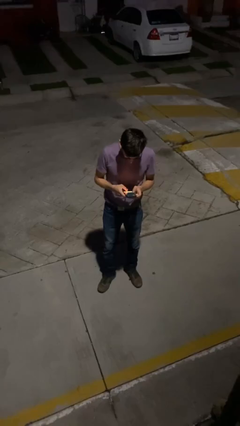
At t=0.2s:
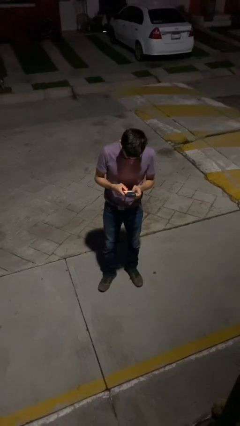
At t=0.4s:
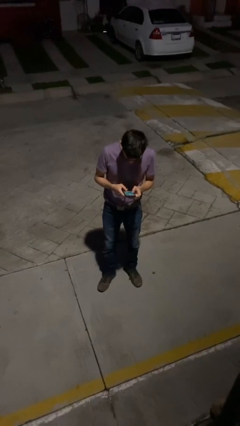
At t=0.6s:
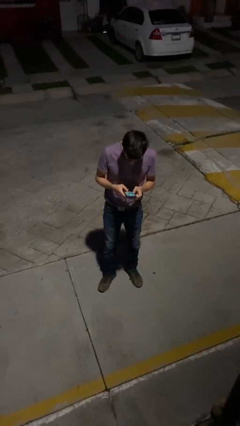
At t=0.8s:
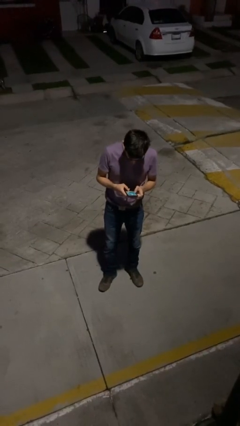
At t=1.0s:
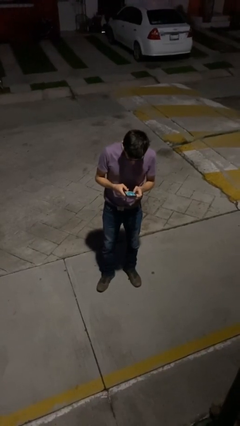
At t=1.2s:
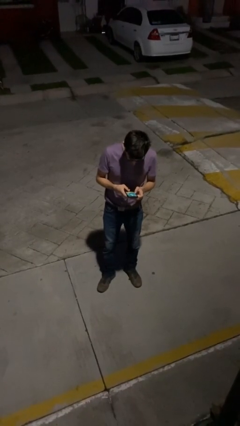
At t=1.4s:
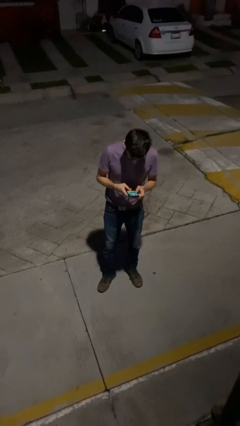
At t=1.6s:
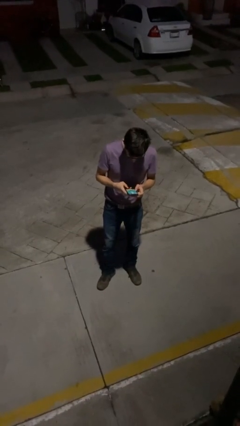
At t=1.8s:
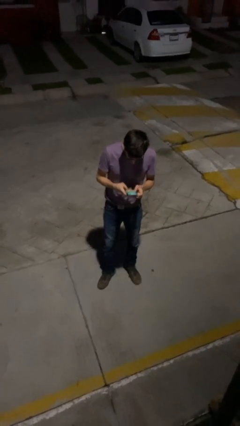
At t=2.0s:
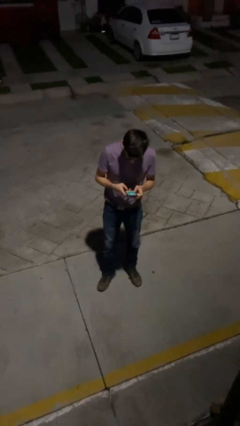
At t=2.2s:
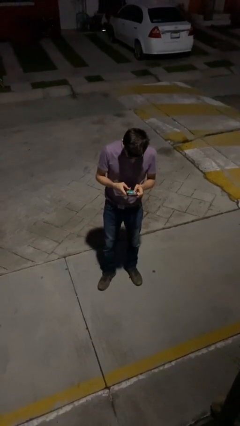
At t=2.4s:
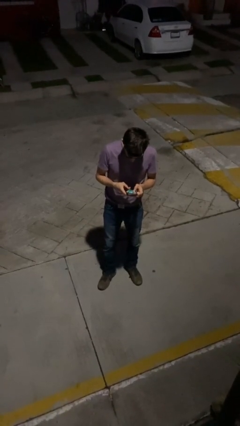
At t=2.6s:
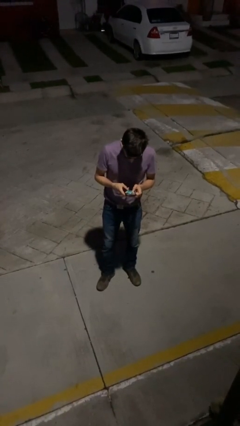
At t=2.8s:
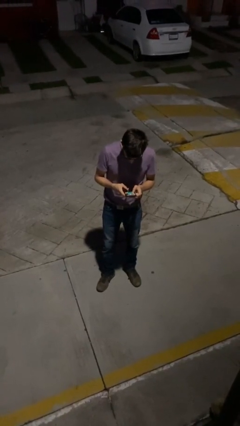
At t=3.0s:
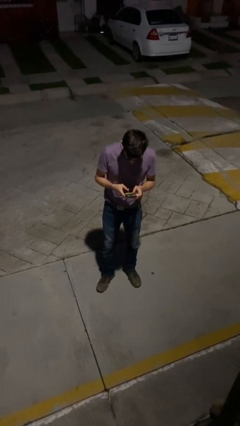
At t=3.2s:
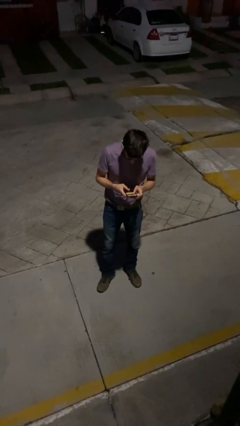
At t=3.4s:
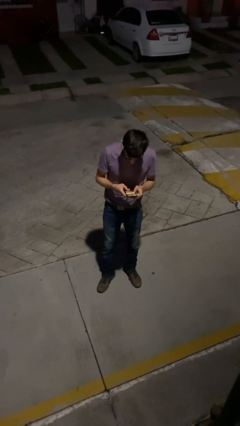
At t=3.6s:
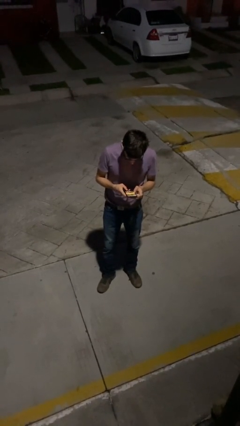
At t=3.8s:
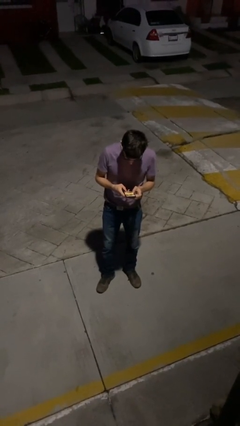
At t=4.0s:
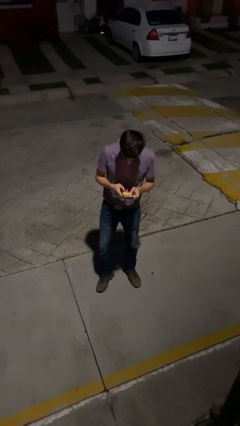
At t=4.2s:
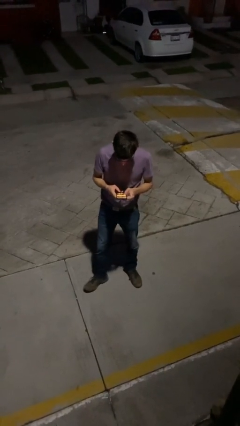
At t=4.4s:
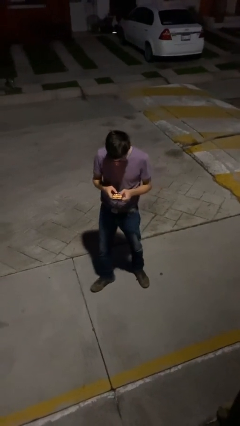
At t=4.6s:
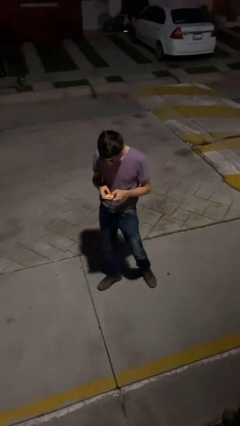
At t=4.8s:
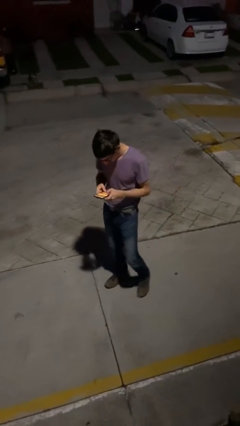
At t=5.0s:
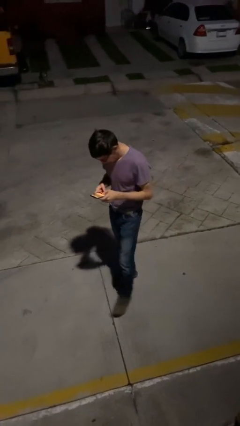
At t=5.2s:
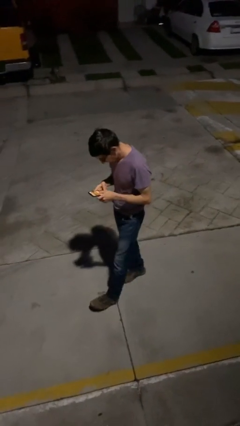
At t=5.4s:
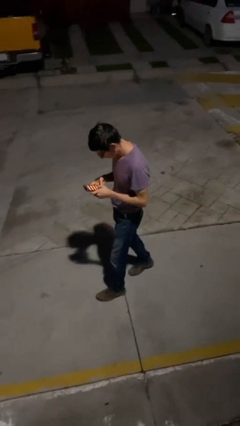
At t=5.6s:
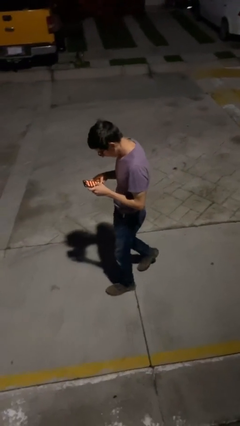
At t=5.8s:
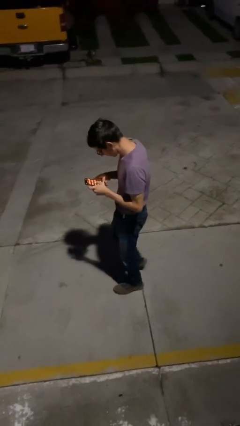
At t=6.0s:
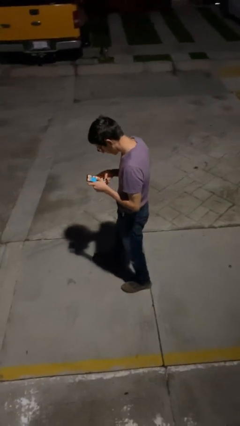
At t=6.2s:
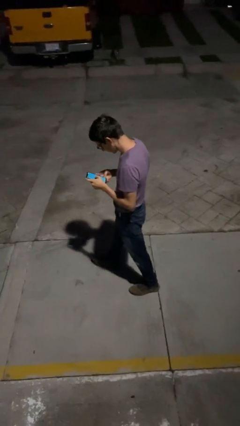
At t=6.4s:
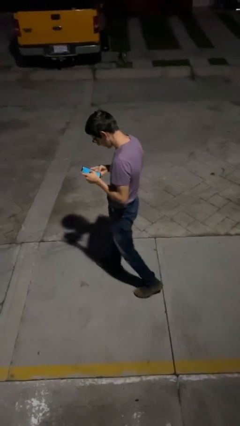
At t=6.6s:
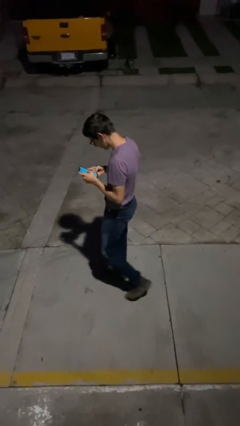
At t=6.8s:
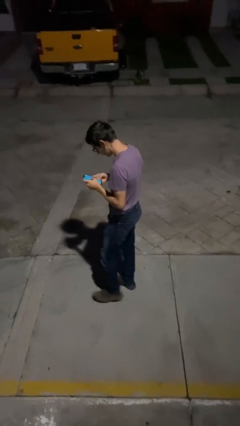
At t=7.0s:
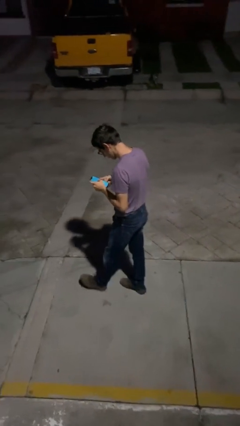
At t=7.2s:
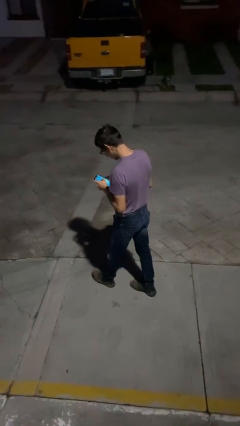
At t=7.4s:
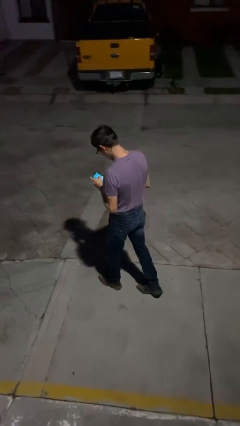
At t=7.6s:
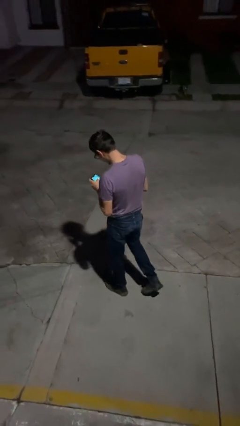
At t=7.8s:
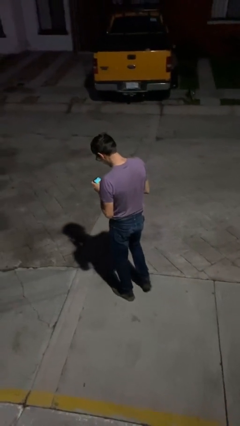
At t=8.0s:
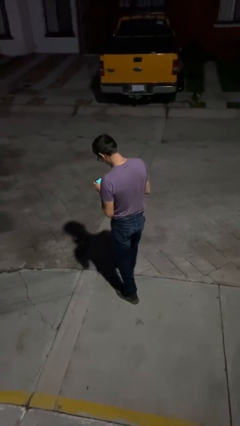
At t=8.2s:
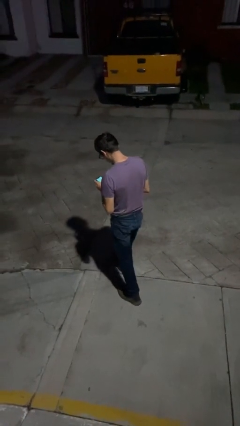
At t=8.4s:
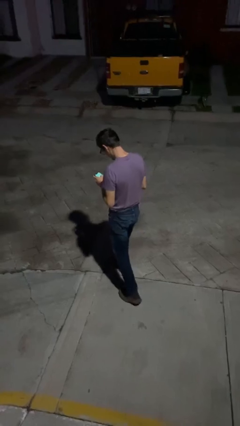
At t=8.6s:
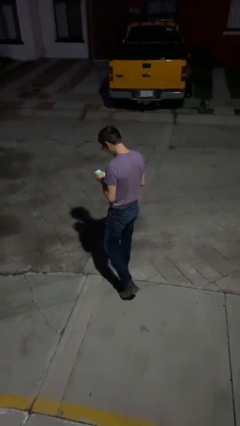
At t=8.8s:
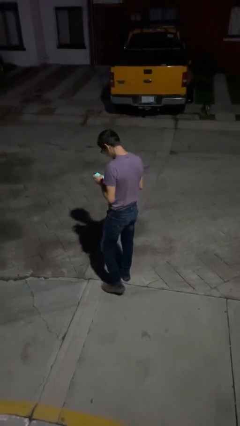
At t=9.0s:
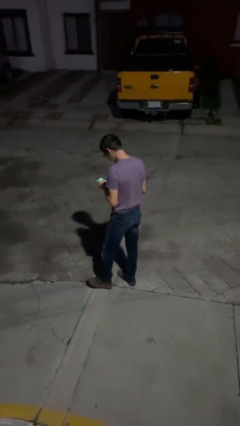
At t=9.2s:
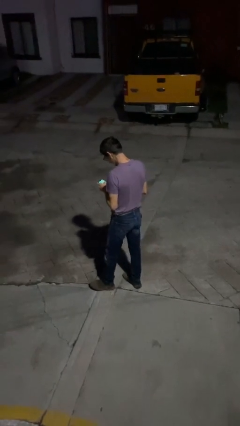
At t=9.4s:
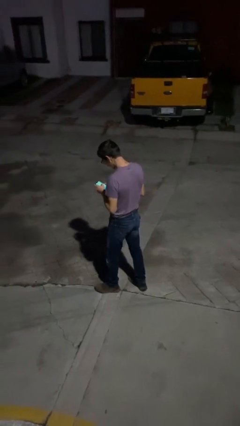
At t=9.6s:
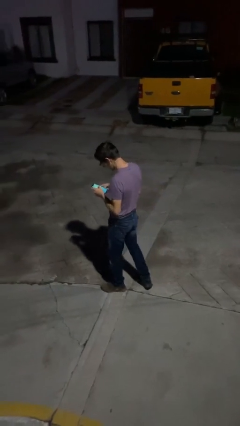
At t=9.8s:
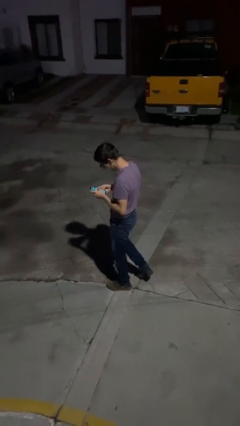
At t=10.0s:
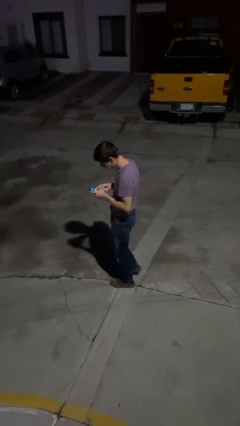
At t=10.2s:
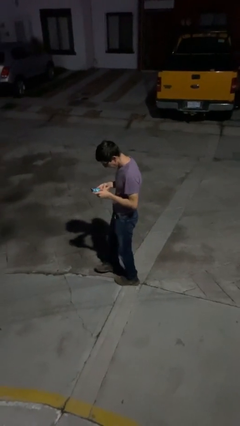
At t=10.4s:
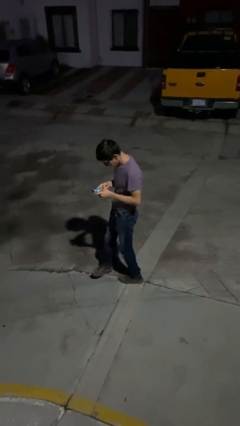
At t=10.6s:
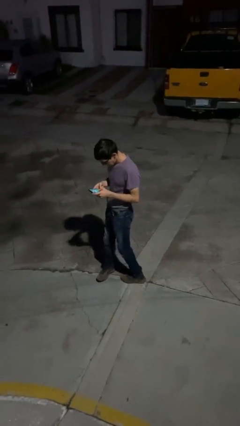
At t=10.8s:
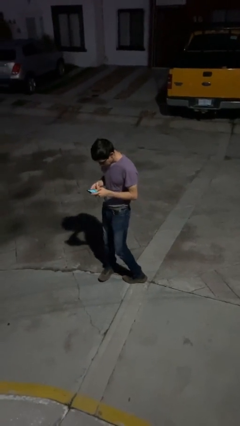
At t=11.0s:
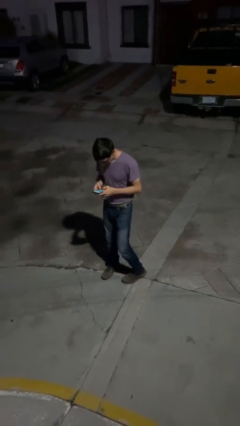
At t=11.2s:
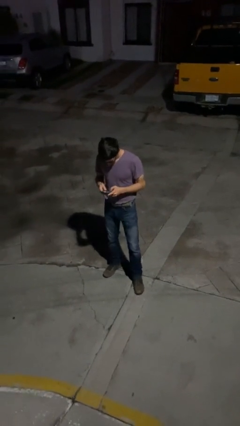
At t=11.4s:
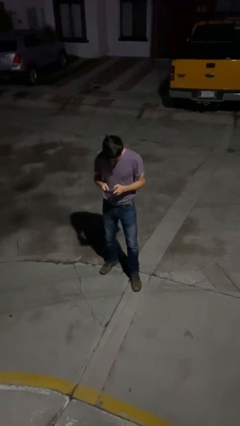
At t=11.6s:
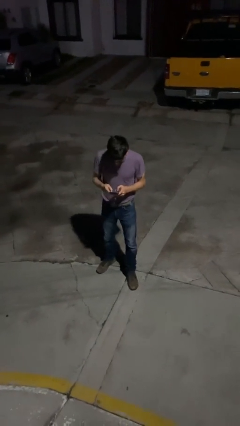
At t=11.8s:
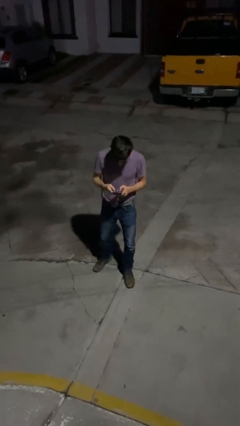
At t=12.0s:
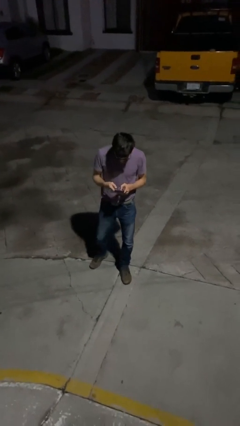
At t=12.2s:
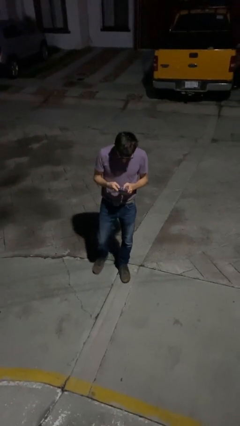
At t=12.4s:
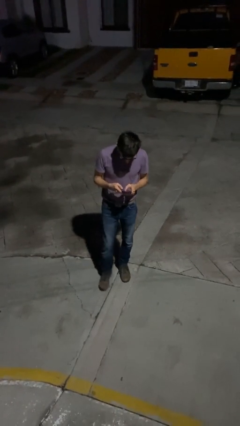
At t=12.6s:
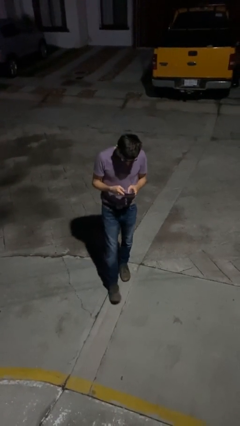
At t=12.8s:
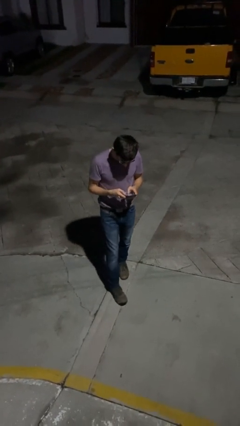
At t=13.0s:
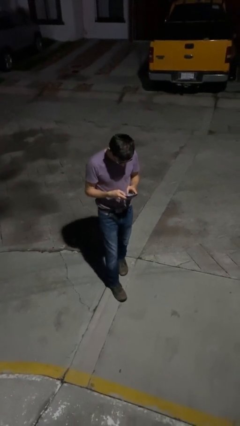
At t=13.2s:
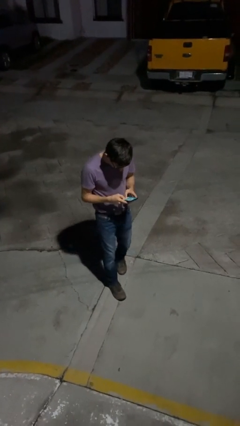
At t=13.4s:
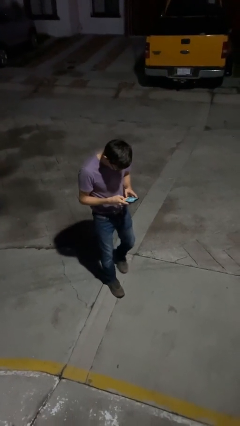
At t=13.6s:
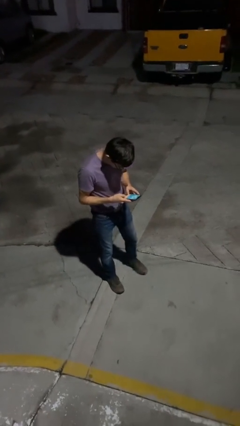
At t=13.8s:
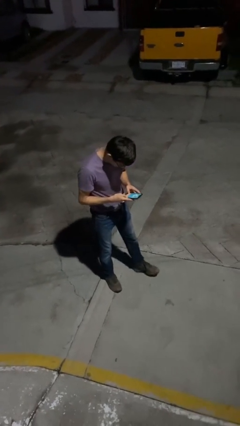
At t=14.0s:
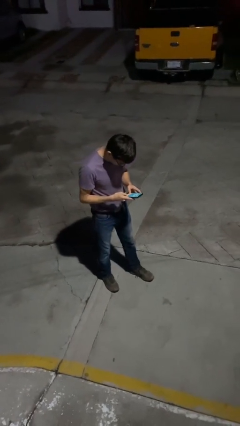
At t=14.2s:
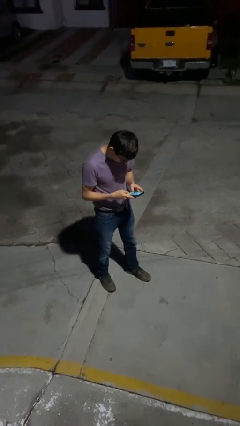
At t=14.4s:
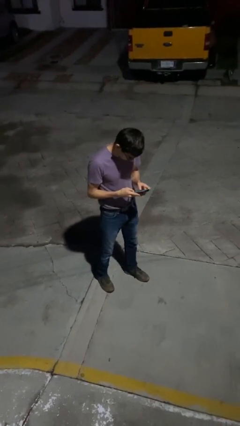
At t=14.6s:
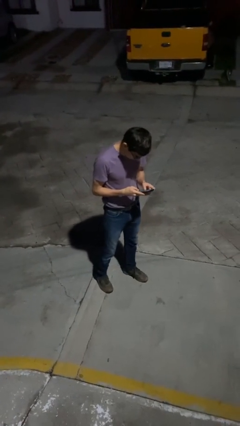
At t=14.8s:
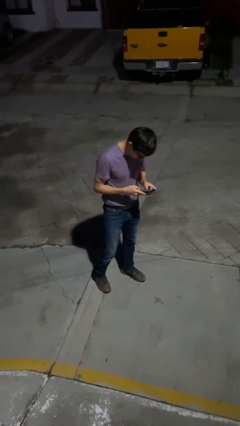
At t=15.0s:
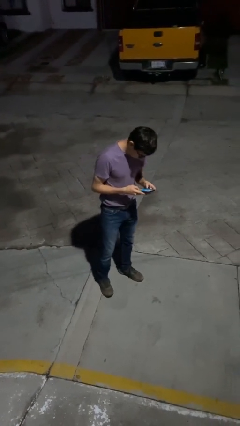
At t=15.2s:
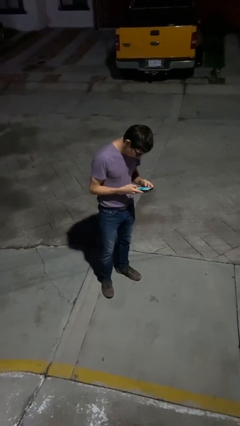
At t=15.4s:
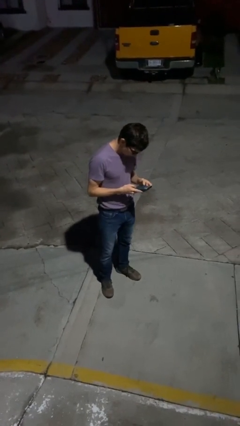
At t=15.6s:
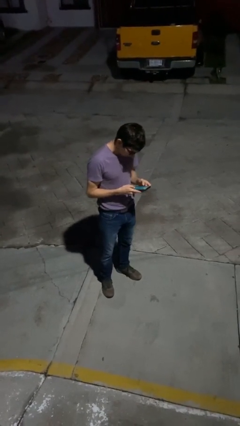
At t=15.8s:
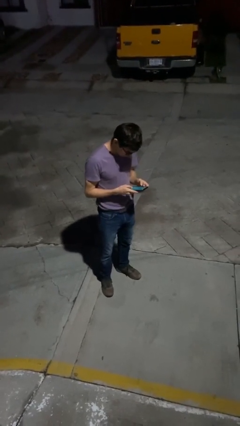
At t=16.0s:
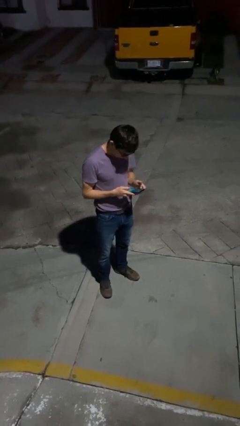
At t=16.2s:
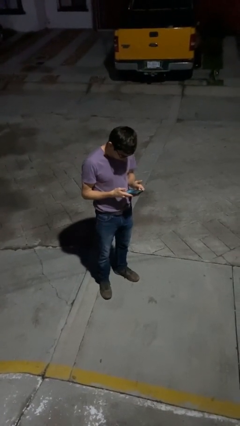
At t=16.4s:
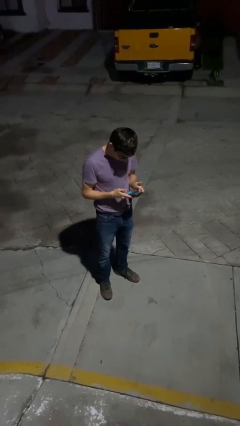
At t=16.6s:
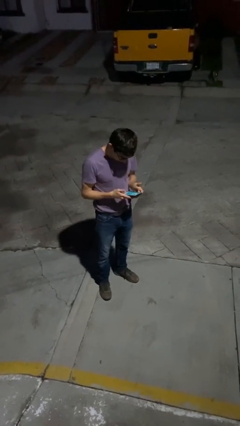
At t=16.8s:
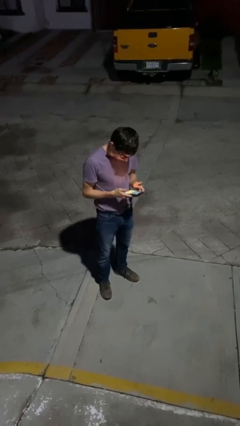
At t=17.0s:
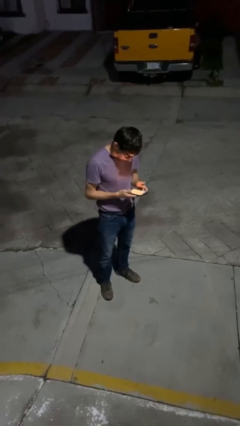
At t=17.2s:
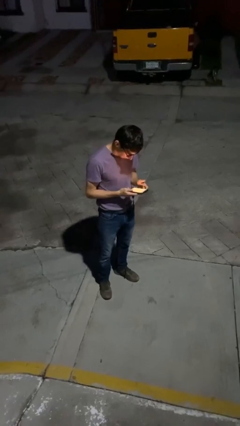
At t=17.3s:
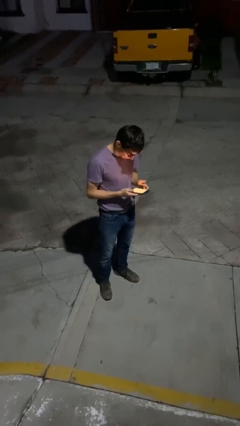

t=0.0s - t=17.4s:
person texts on phone

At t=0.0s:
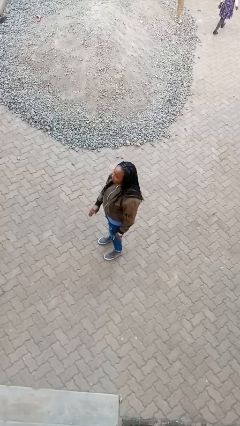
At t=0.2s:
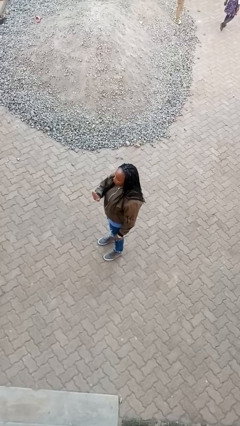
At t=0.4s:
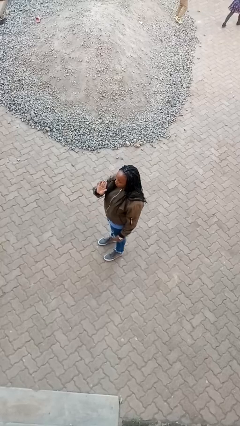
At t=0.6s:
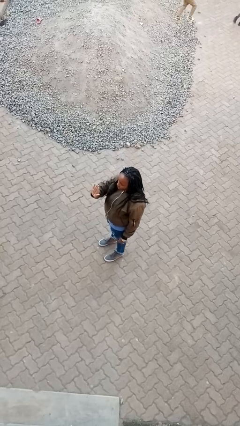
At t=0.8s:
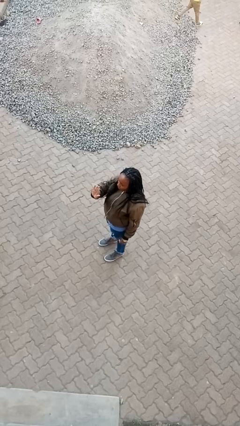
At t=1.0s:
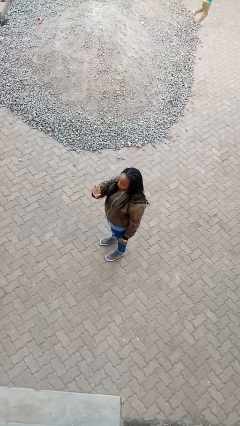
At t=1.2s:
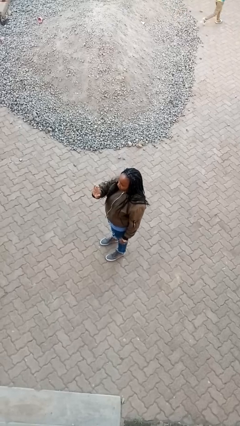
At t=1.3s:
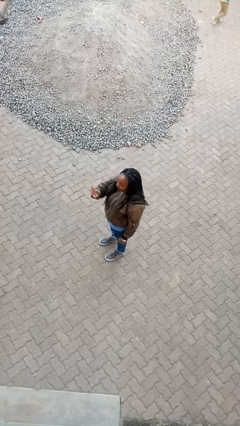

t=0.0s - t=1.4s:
person gestures stop
